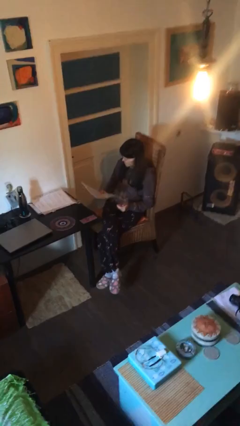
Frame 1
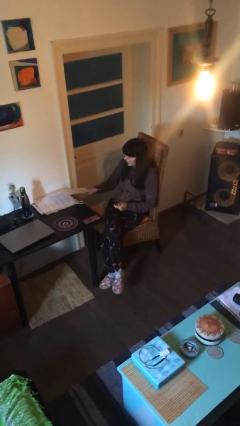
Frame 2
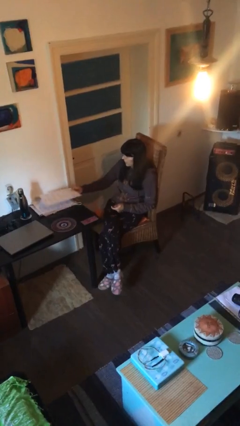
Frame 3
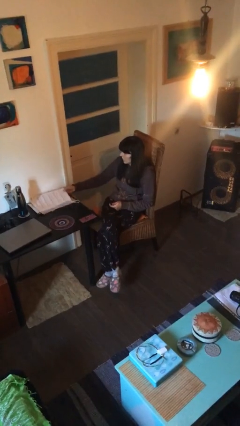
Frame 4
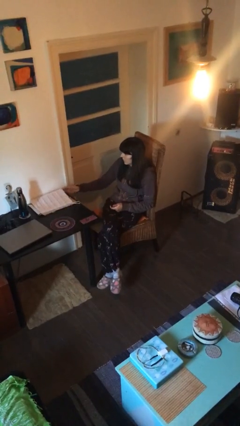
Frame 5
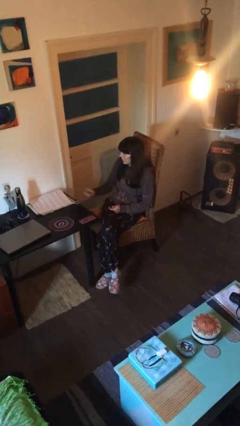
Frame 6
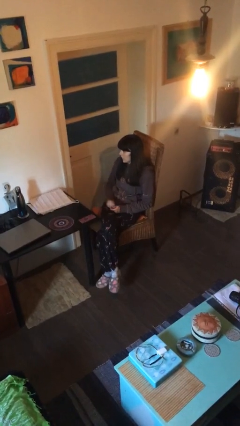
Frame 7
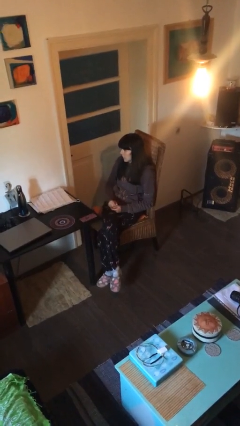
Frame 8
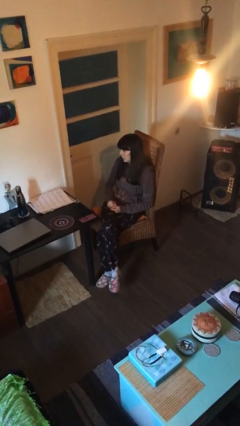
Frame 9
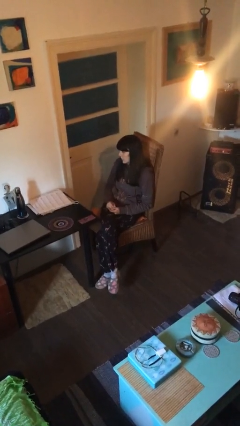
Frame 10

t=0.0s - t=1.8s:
person puts down object on table

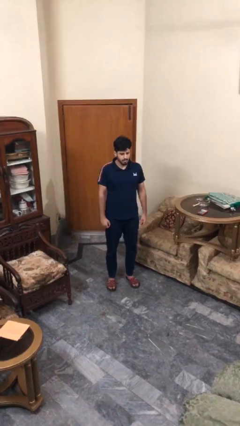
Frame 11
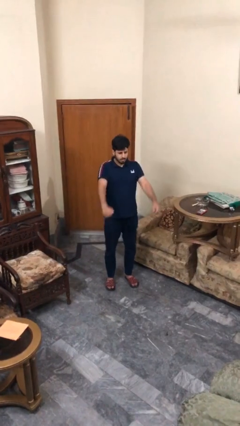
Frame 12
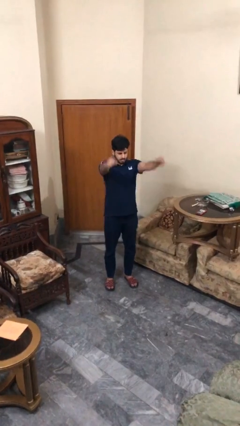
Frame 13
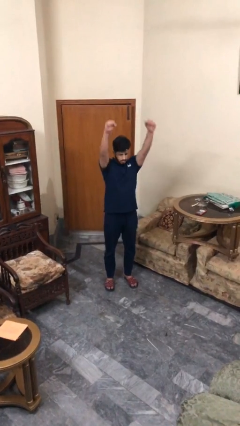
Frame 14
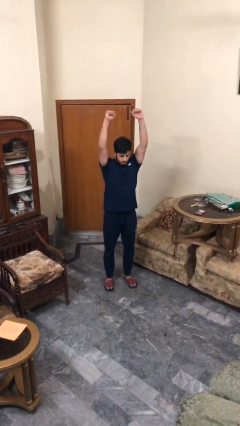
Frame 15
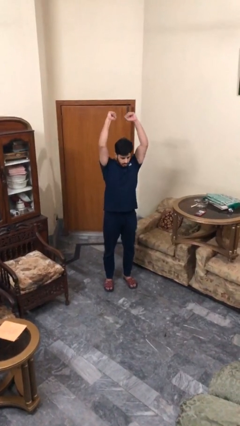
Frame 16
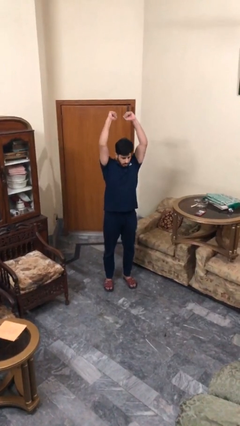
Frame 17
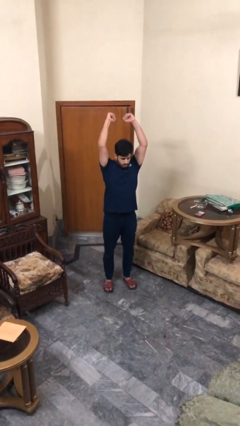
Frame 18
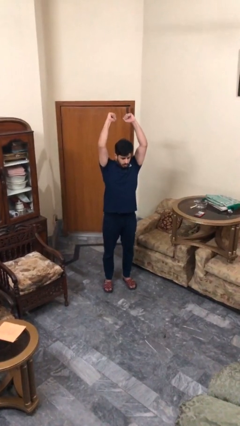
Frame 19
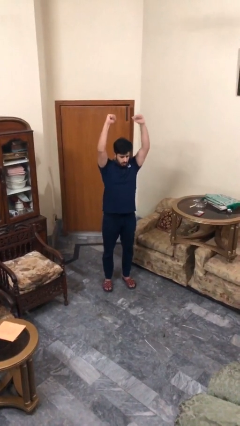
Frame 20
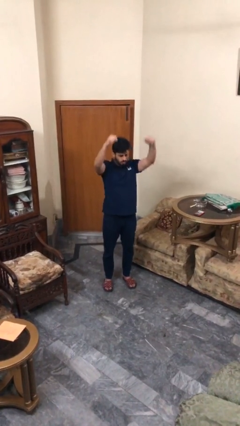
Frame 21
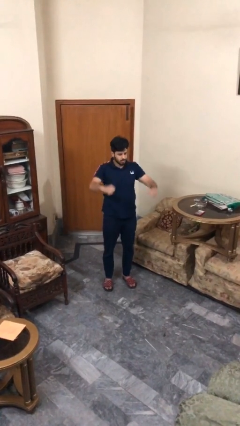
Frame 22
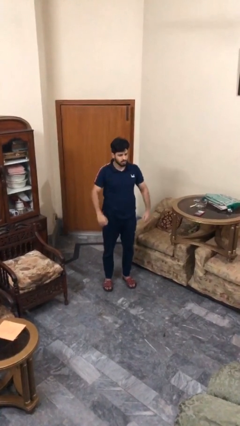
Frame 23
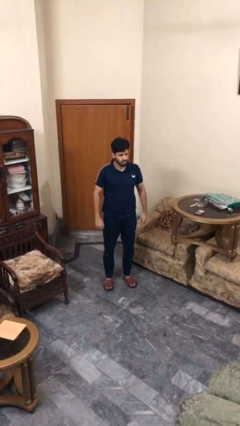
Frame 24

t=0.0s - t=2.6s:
person stretches arms over head

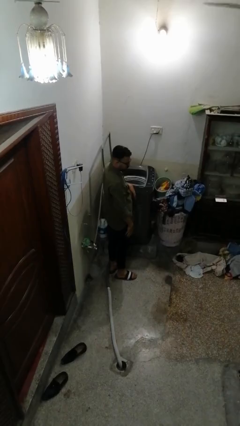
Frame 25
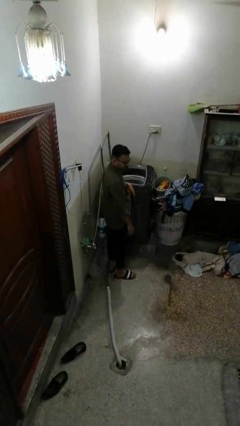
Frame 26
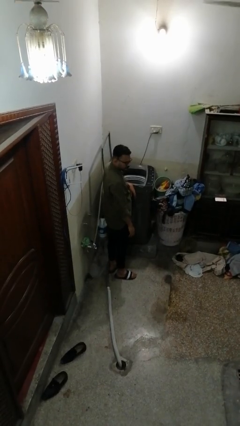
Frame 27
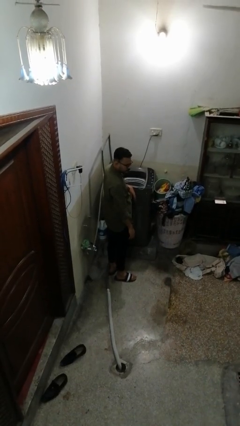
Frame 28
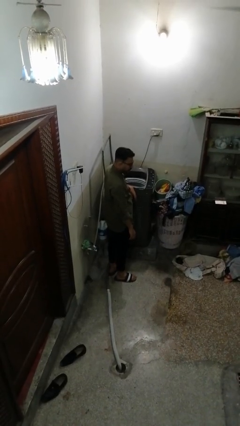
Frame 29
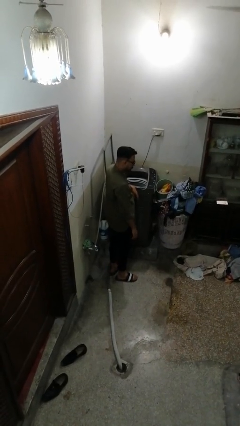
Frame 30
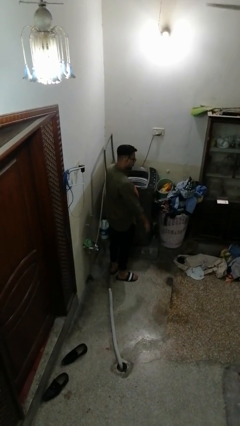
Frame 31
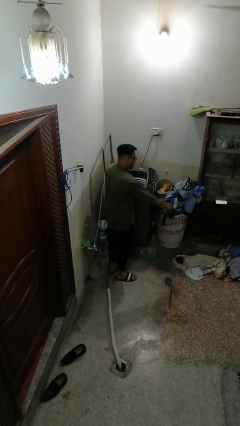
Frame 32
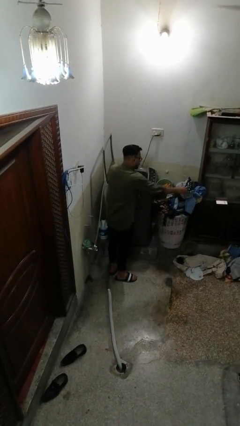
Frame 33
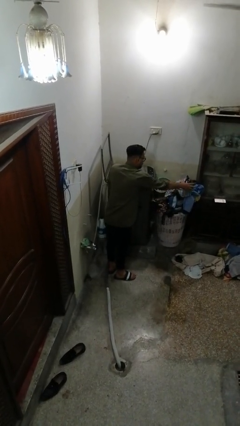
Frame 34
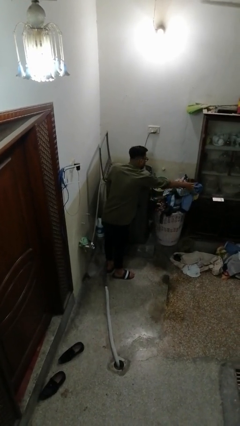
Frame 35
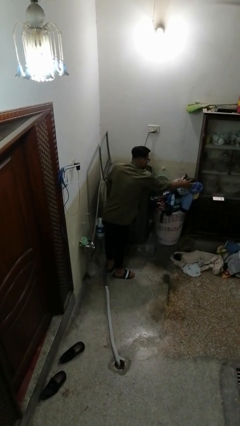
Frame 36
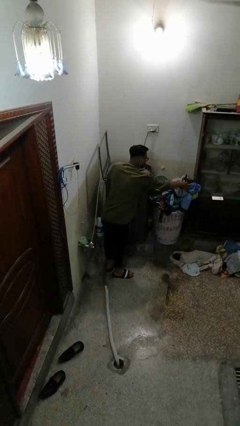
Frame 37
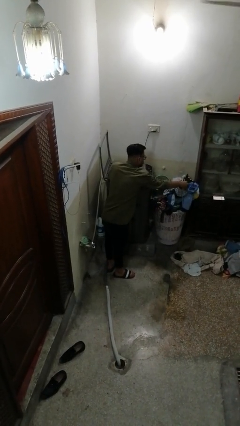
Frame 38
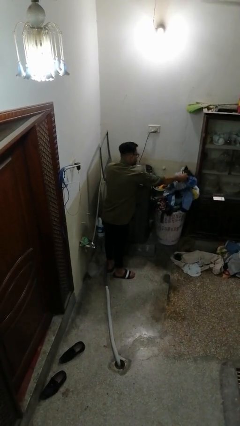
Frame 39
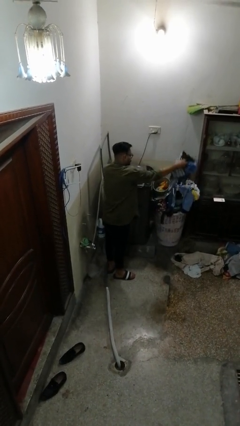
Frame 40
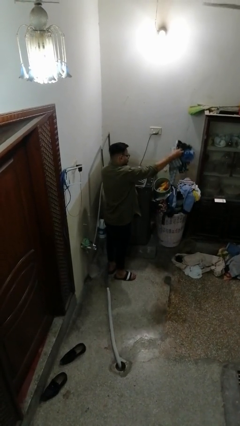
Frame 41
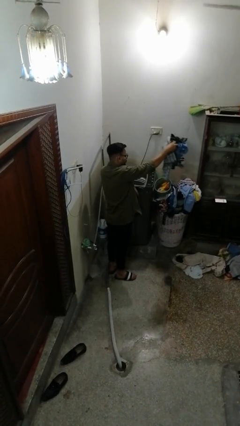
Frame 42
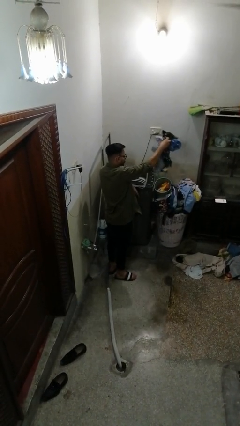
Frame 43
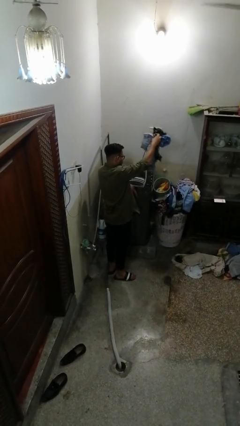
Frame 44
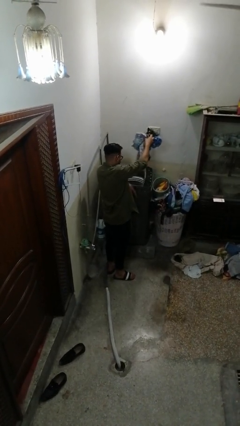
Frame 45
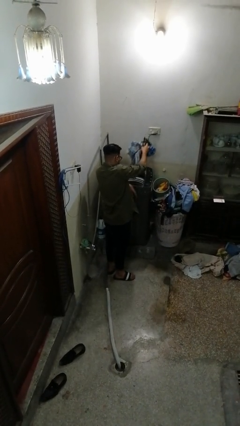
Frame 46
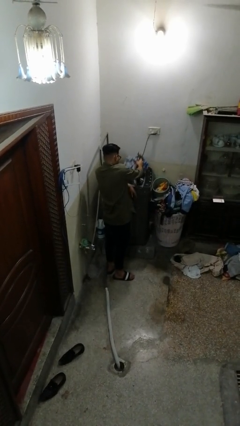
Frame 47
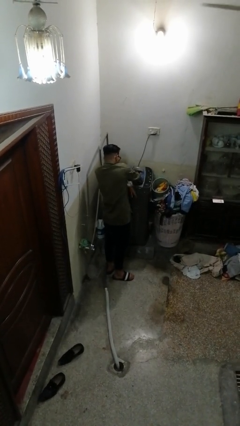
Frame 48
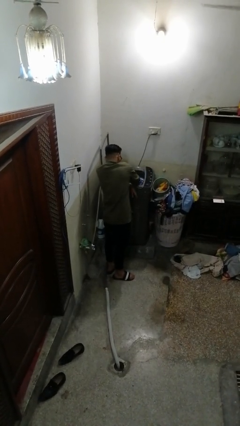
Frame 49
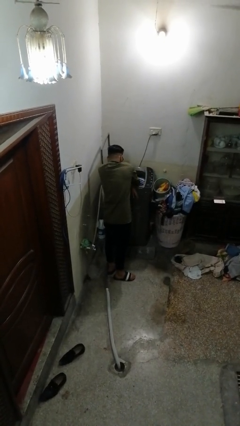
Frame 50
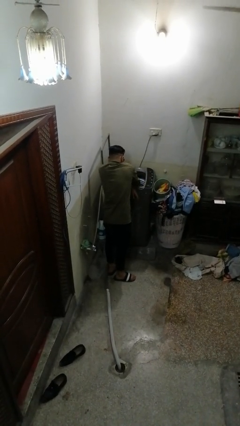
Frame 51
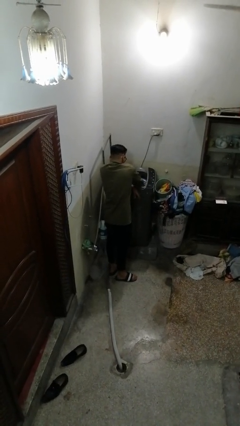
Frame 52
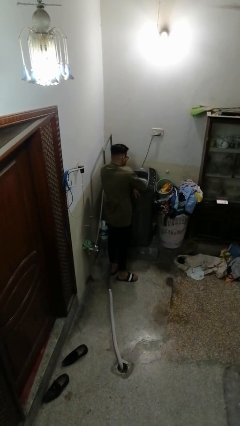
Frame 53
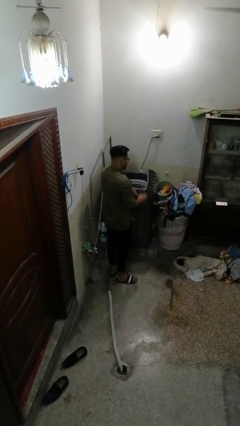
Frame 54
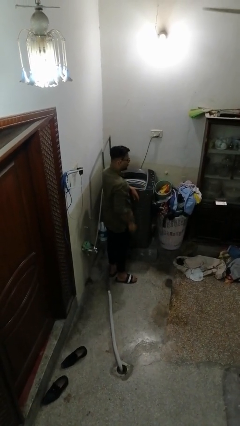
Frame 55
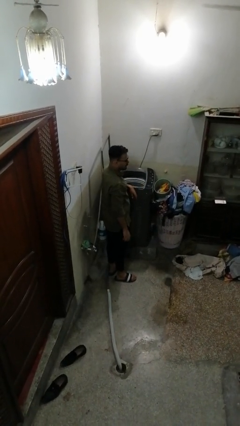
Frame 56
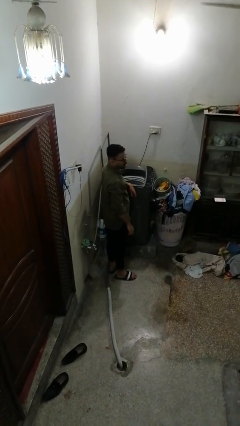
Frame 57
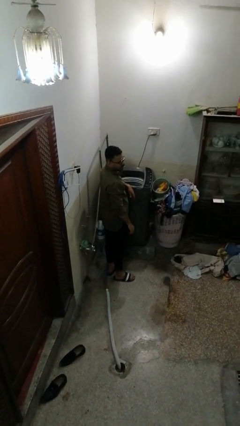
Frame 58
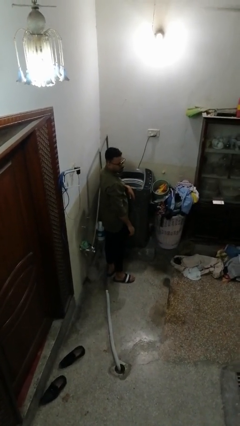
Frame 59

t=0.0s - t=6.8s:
person loads clotheswasher

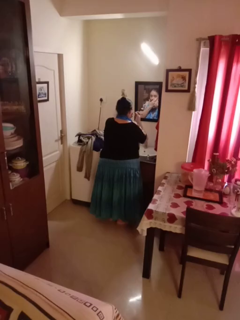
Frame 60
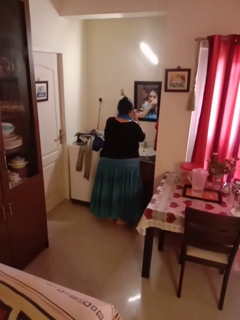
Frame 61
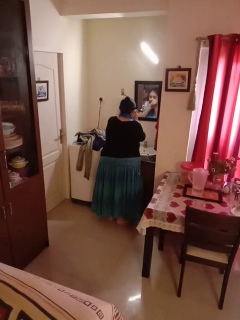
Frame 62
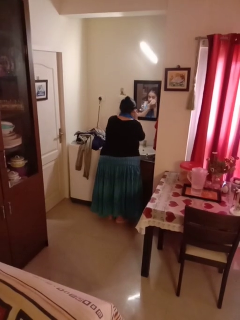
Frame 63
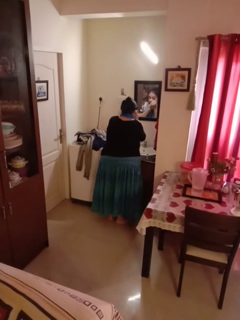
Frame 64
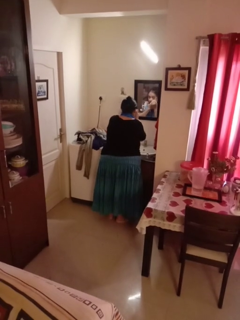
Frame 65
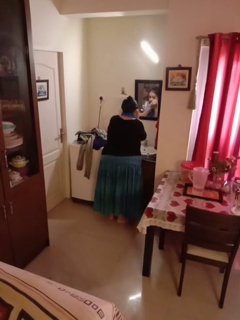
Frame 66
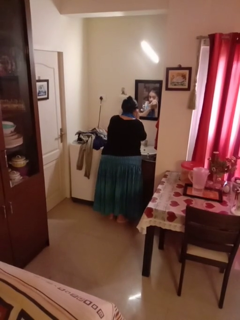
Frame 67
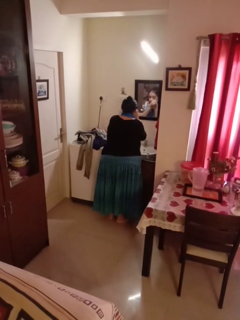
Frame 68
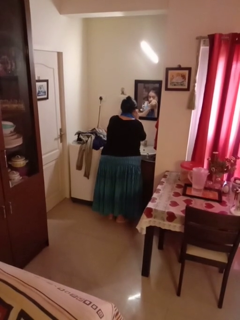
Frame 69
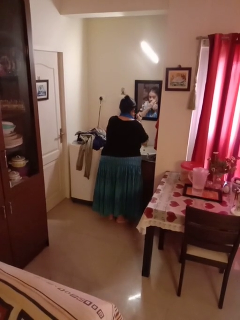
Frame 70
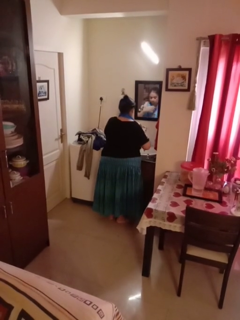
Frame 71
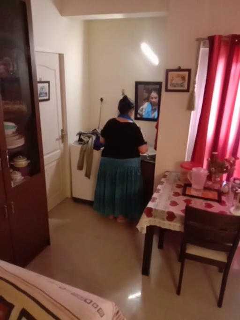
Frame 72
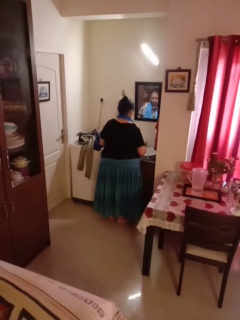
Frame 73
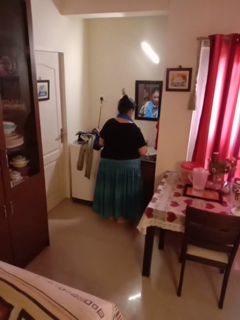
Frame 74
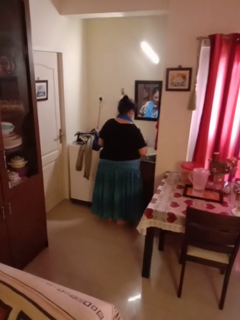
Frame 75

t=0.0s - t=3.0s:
person applies eye makeup

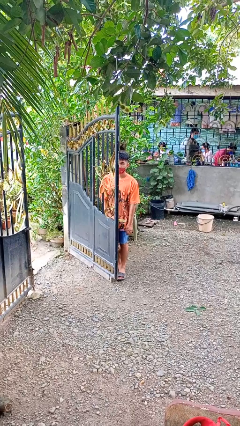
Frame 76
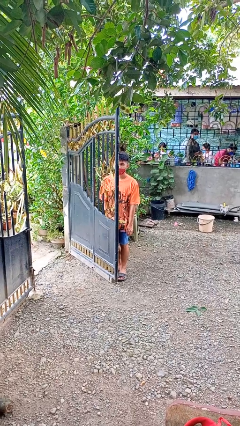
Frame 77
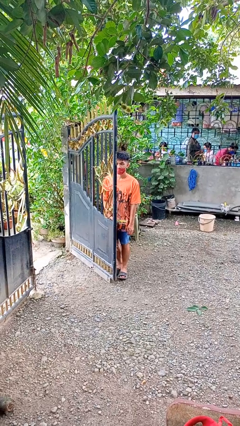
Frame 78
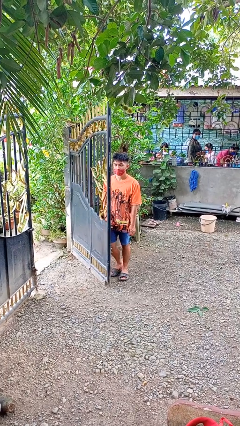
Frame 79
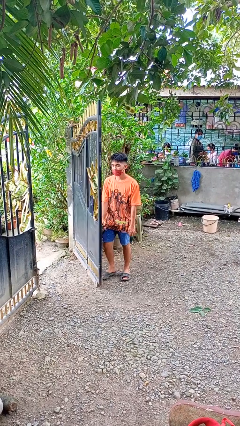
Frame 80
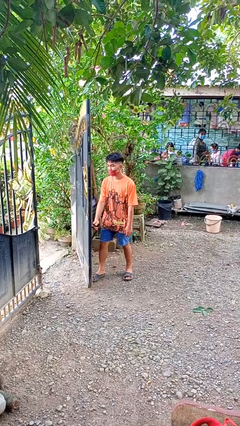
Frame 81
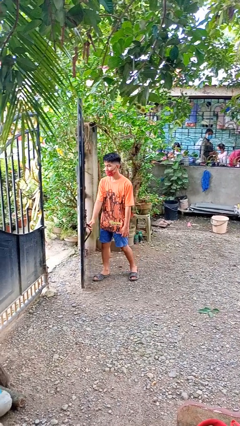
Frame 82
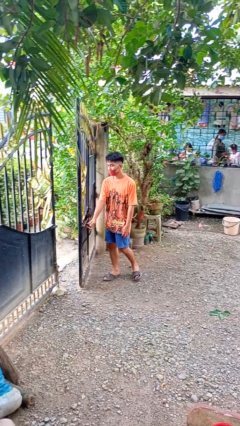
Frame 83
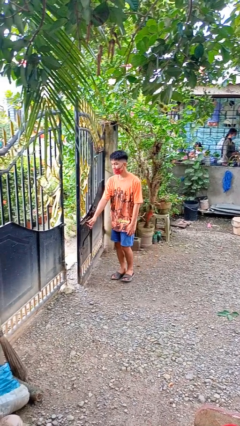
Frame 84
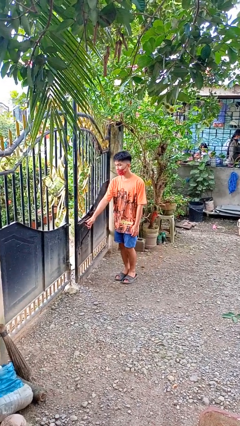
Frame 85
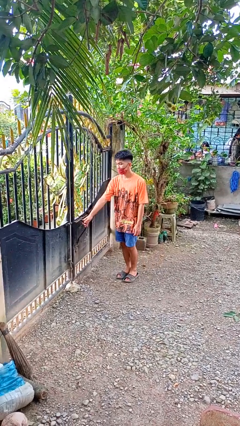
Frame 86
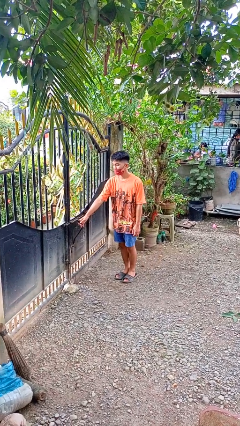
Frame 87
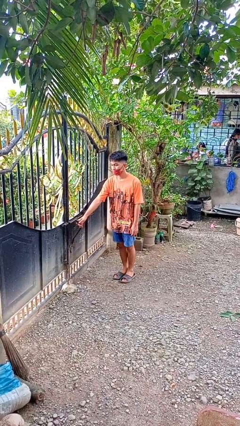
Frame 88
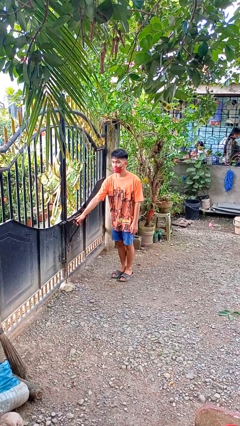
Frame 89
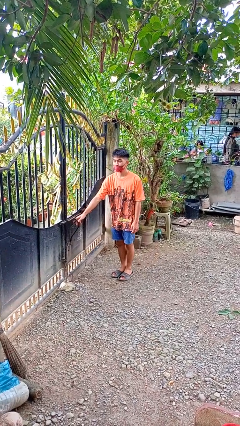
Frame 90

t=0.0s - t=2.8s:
person closes gate

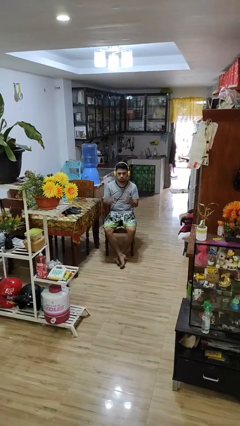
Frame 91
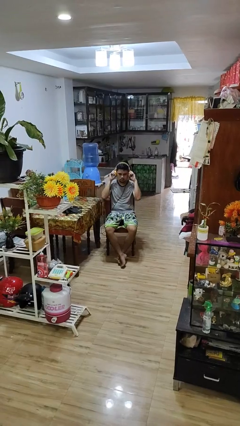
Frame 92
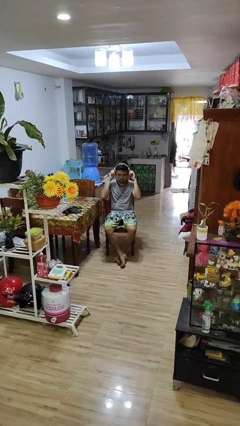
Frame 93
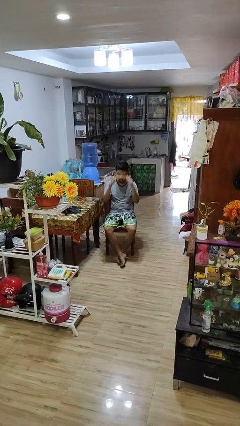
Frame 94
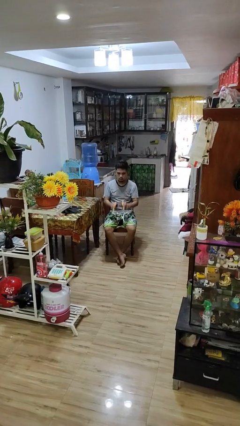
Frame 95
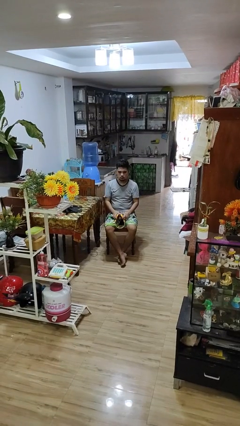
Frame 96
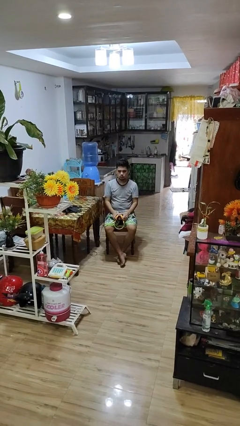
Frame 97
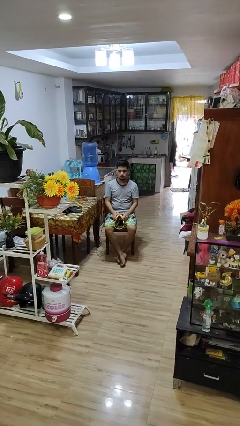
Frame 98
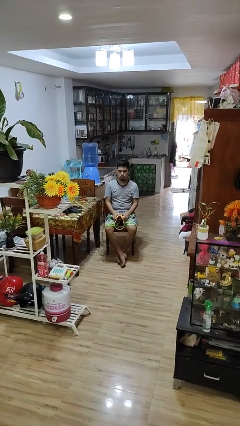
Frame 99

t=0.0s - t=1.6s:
person takes off headphones
